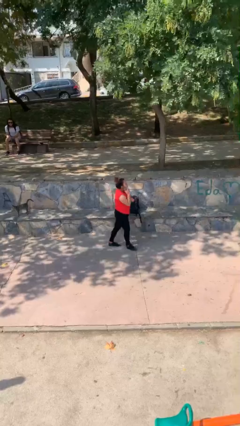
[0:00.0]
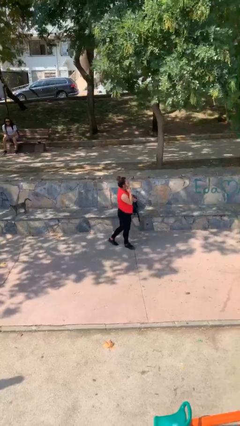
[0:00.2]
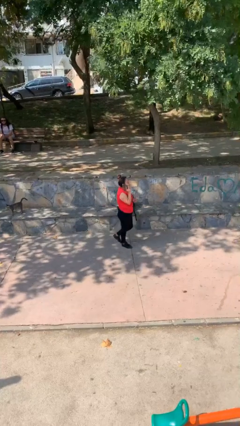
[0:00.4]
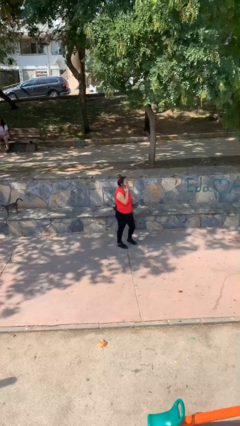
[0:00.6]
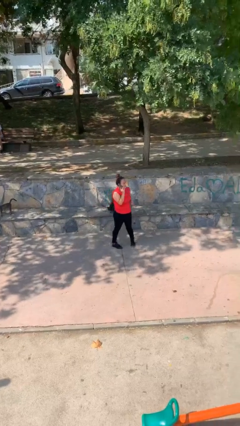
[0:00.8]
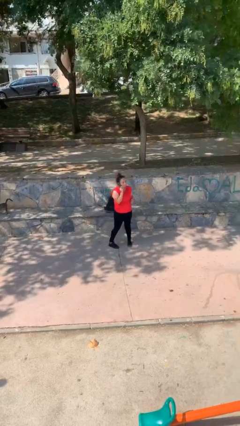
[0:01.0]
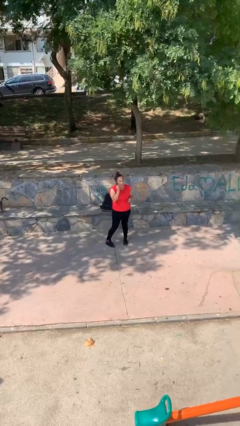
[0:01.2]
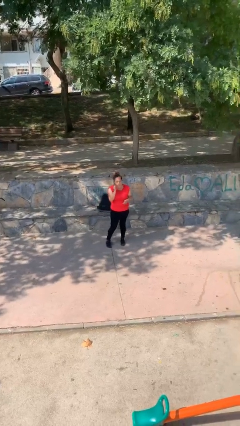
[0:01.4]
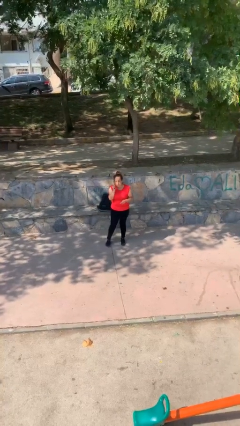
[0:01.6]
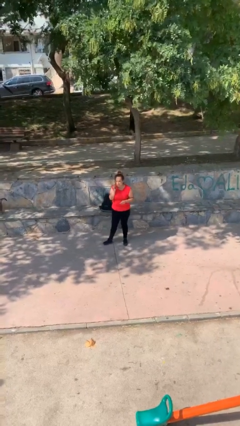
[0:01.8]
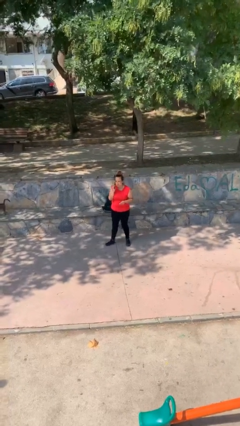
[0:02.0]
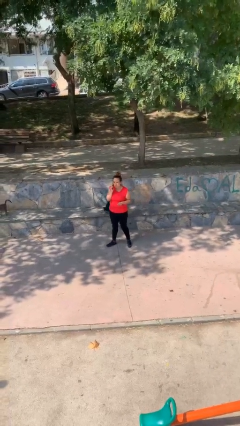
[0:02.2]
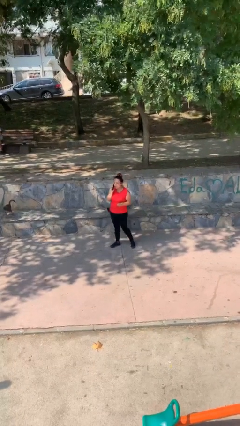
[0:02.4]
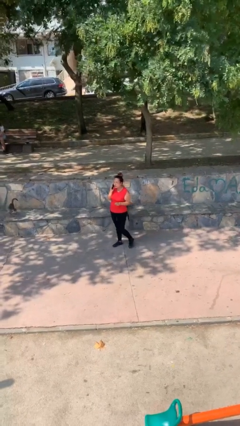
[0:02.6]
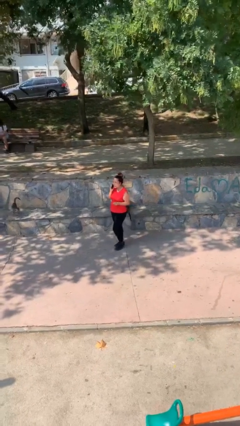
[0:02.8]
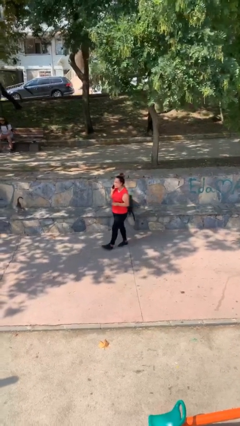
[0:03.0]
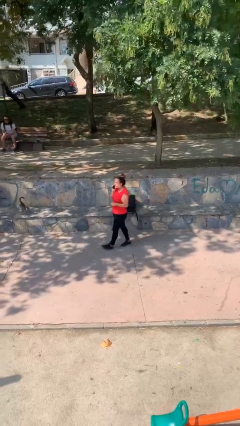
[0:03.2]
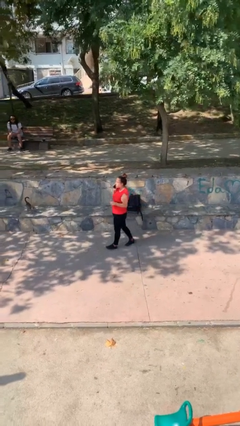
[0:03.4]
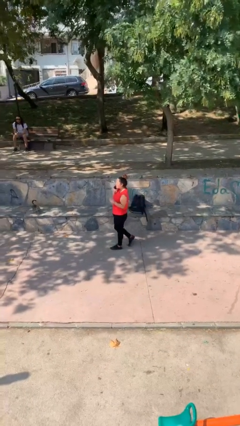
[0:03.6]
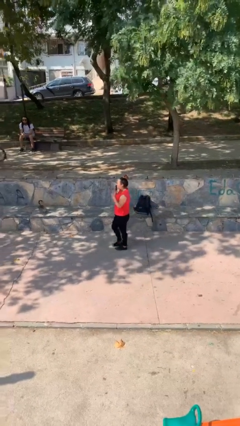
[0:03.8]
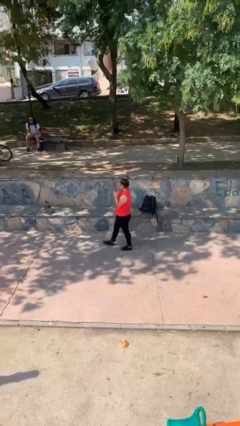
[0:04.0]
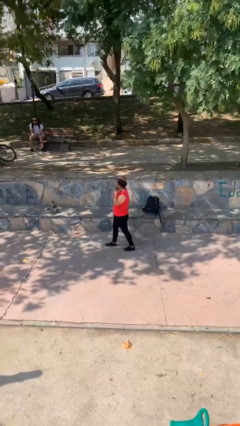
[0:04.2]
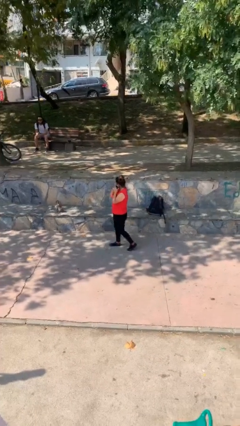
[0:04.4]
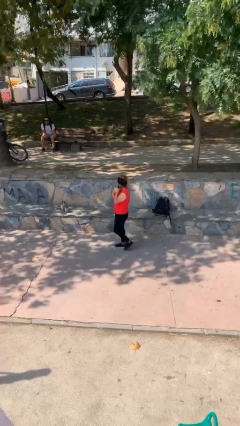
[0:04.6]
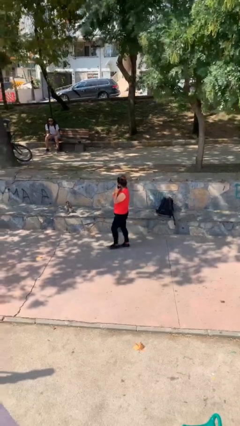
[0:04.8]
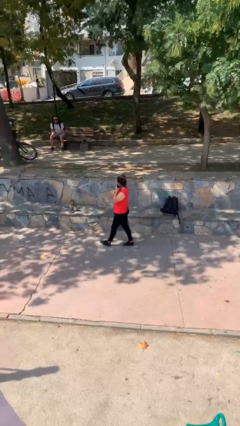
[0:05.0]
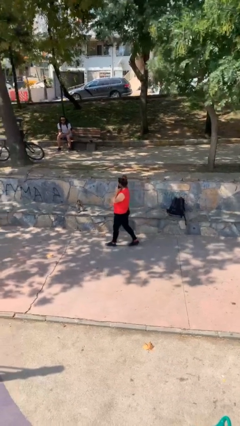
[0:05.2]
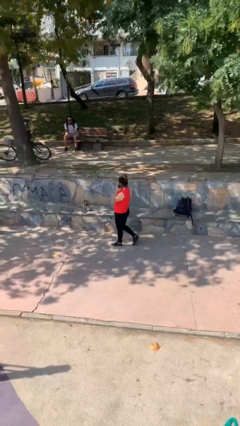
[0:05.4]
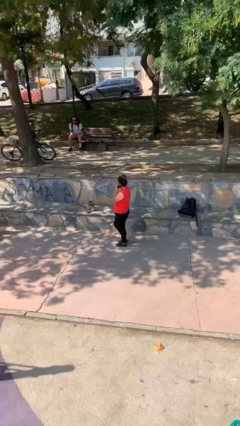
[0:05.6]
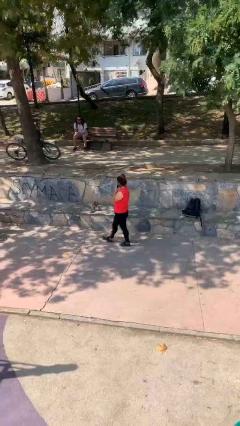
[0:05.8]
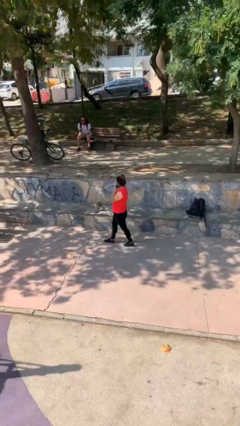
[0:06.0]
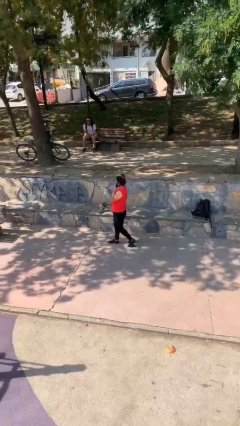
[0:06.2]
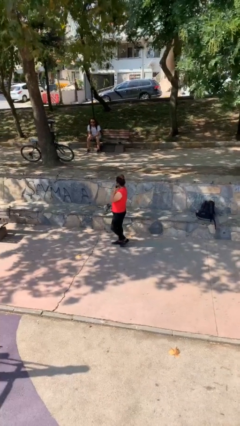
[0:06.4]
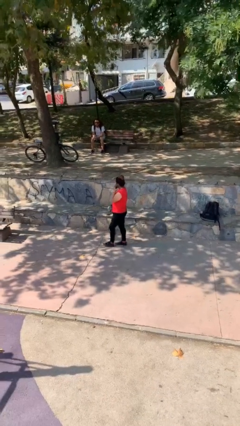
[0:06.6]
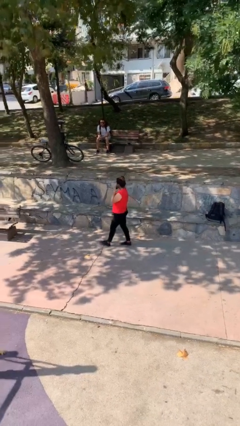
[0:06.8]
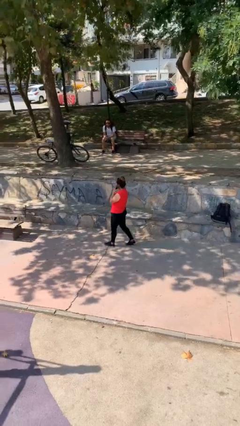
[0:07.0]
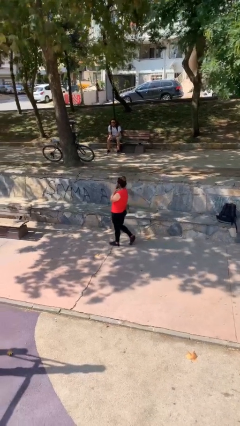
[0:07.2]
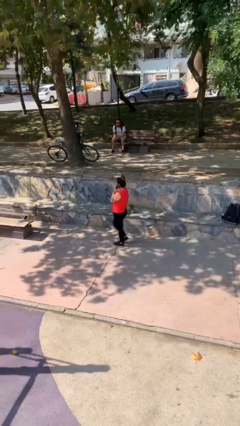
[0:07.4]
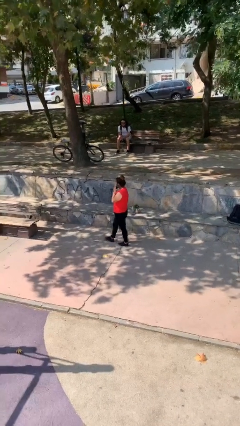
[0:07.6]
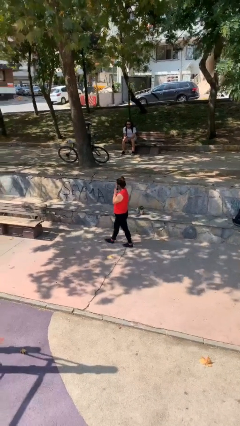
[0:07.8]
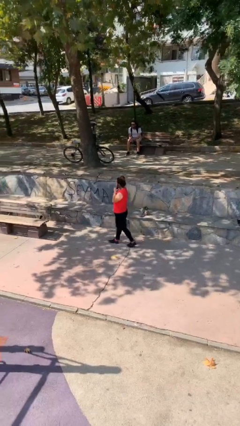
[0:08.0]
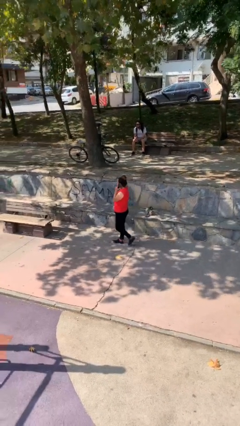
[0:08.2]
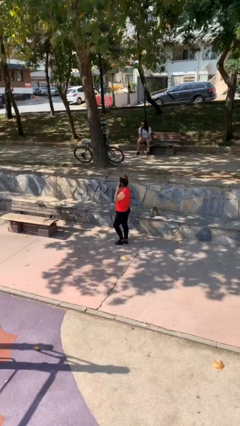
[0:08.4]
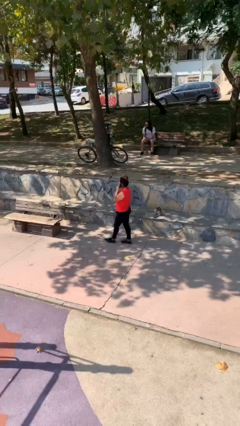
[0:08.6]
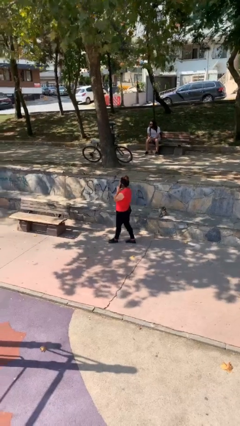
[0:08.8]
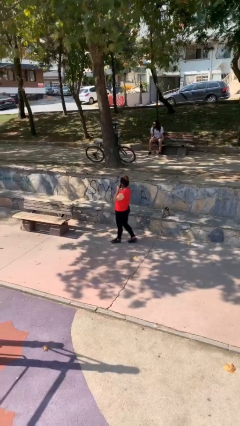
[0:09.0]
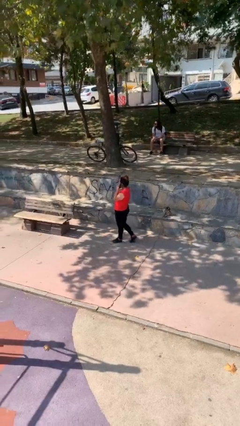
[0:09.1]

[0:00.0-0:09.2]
person talks on phone

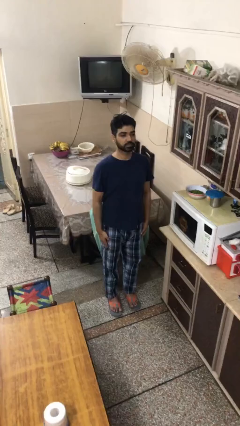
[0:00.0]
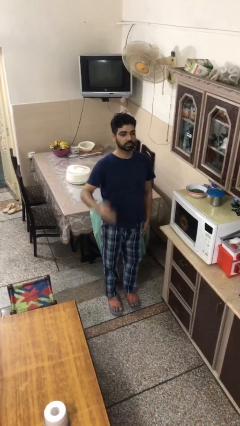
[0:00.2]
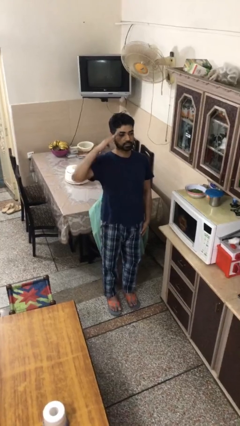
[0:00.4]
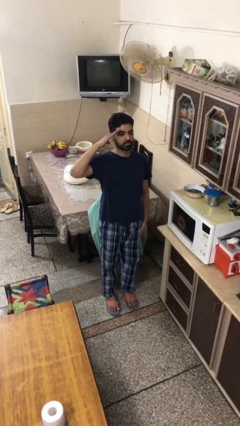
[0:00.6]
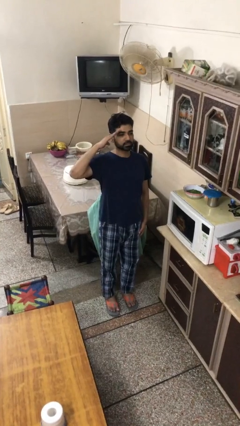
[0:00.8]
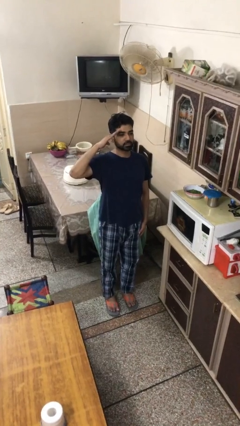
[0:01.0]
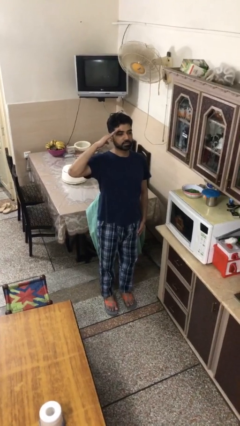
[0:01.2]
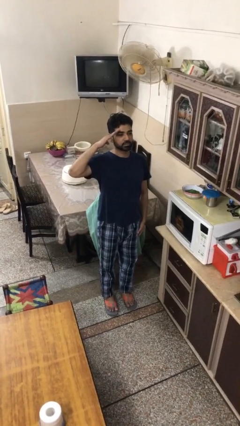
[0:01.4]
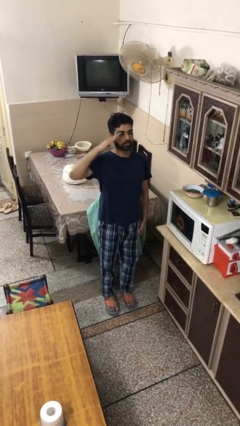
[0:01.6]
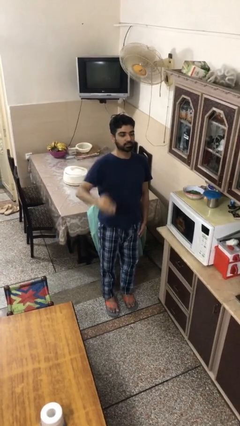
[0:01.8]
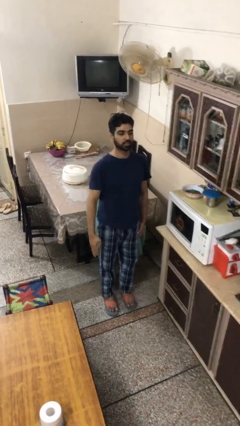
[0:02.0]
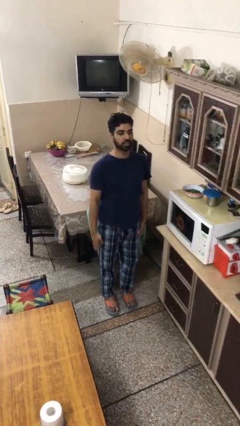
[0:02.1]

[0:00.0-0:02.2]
person salutes

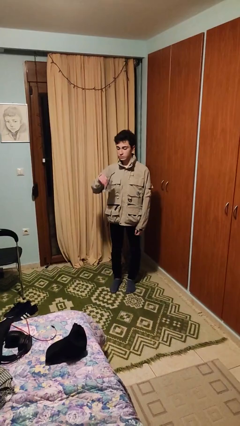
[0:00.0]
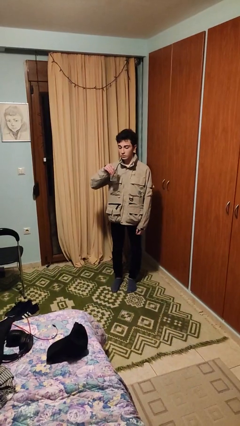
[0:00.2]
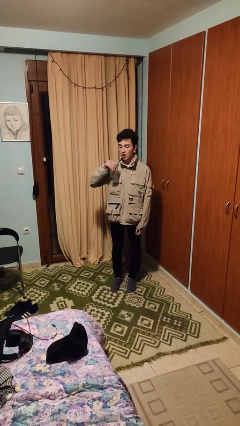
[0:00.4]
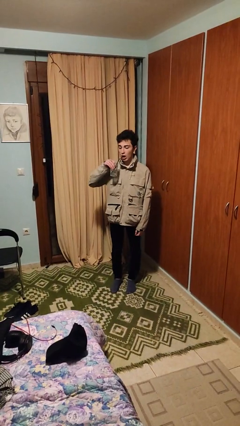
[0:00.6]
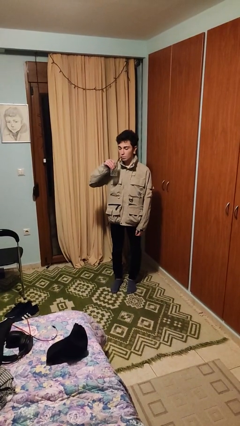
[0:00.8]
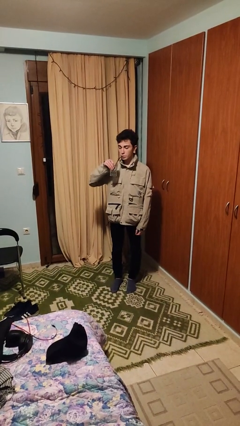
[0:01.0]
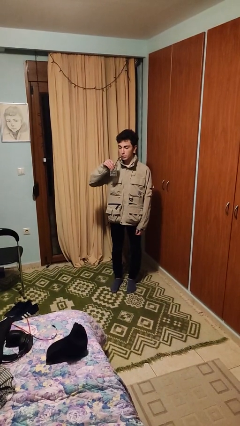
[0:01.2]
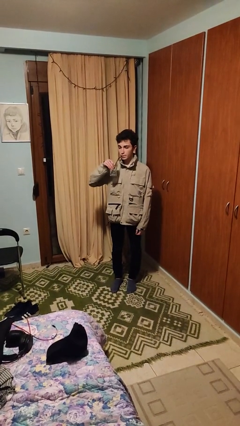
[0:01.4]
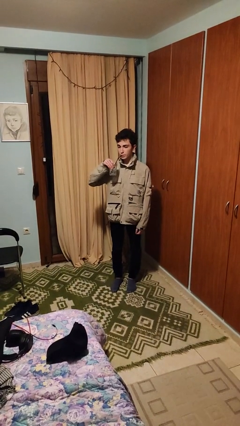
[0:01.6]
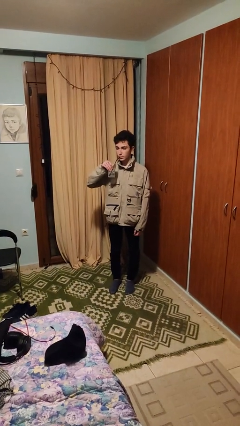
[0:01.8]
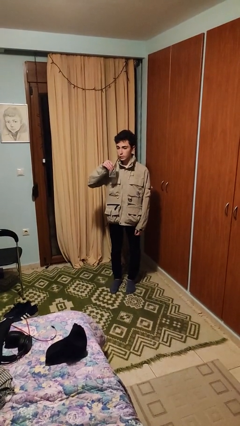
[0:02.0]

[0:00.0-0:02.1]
person drinks from straw

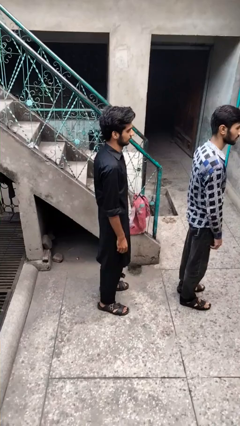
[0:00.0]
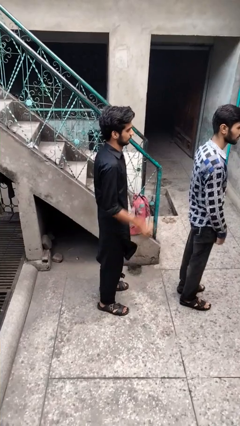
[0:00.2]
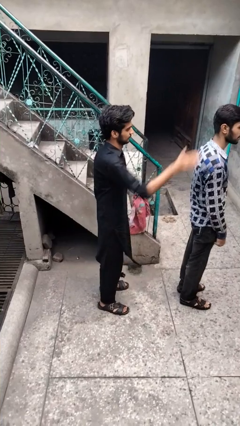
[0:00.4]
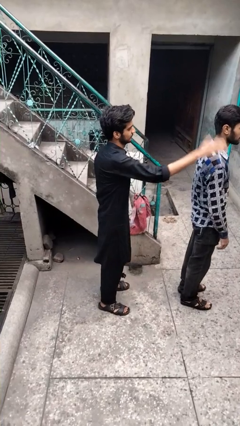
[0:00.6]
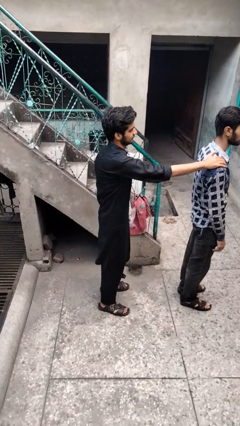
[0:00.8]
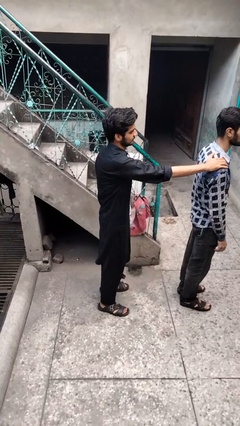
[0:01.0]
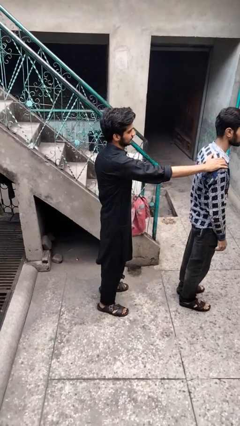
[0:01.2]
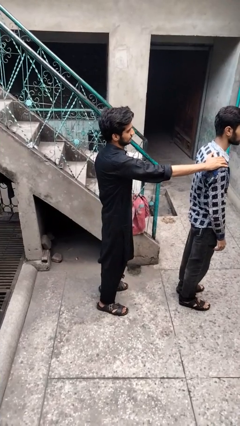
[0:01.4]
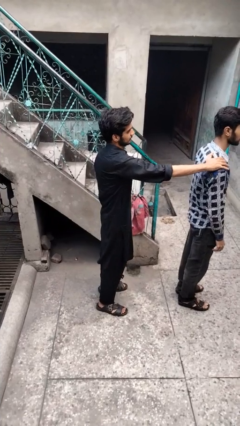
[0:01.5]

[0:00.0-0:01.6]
person grabs person by shoulder

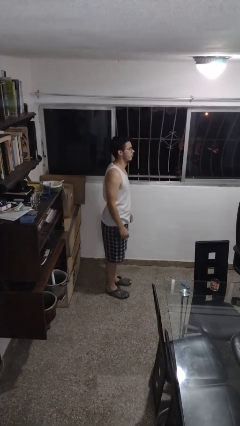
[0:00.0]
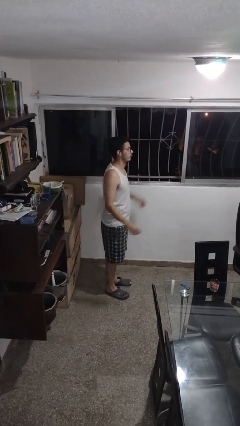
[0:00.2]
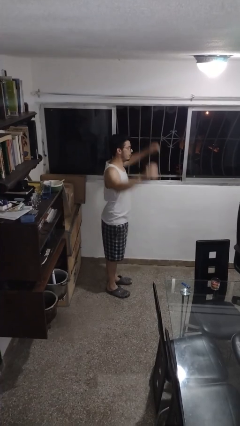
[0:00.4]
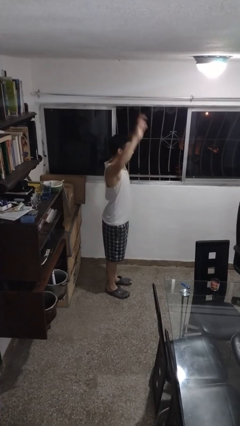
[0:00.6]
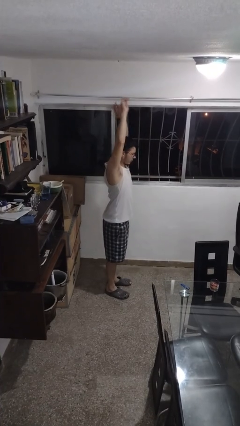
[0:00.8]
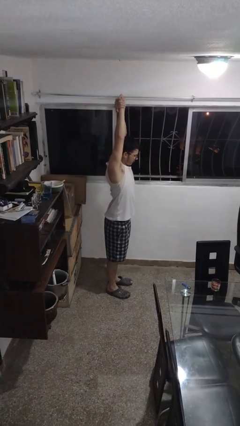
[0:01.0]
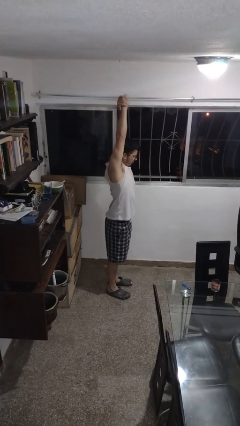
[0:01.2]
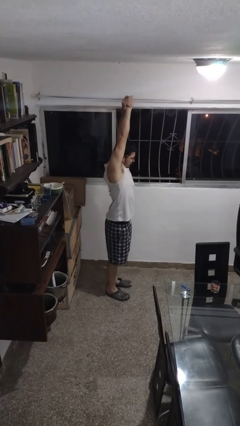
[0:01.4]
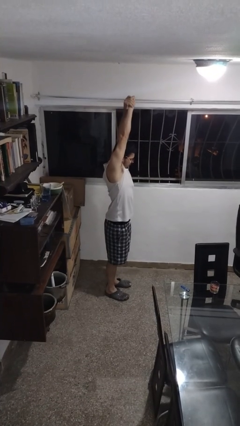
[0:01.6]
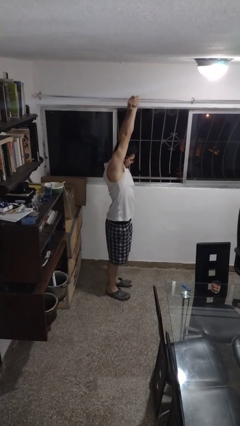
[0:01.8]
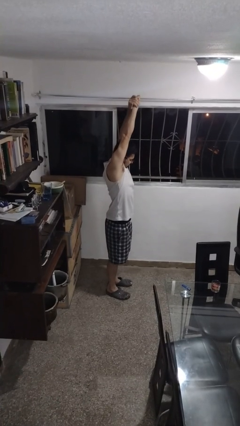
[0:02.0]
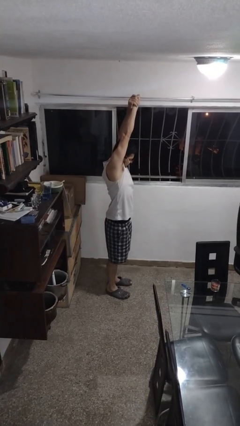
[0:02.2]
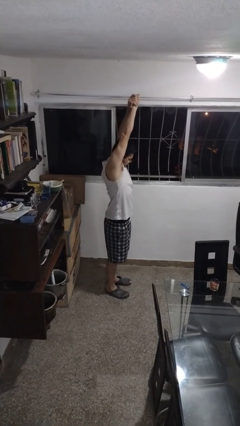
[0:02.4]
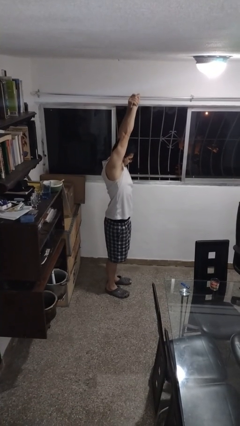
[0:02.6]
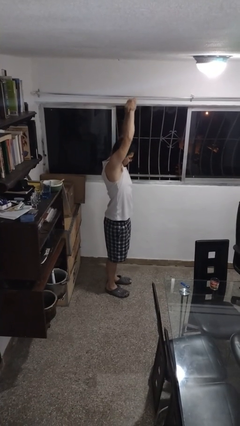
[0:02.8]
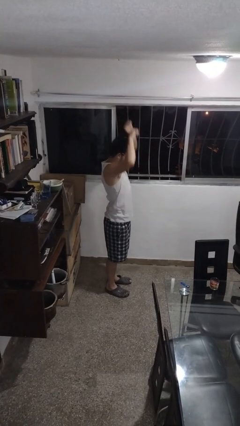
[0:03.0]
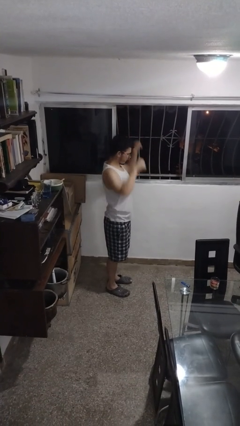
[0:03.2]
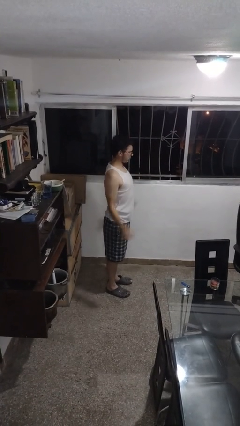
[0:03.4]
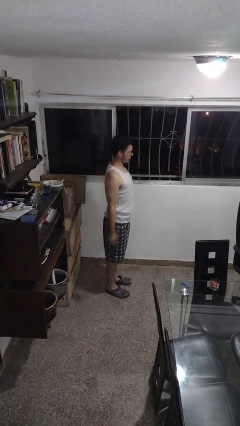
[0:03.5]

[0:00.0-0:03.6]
person stretches arms over head
